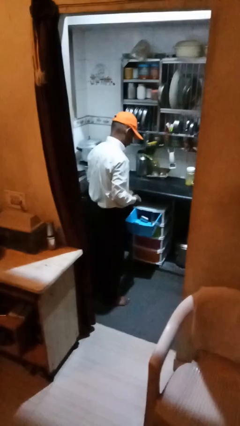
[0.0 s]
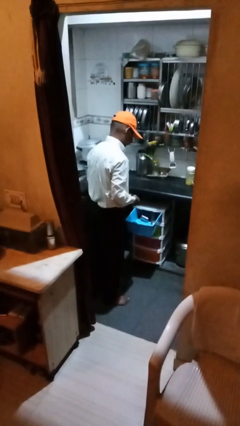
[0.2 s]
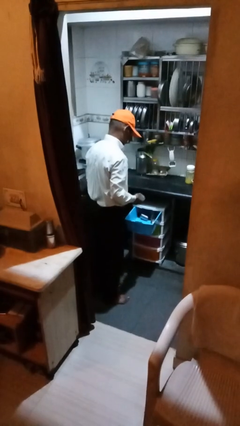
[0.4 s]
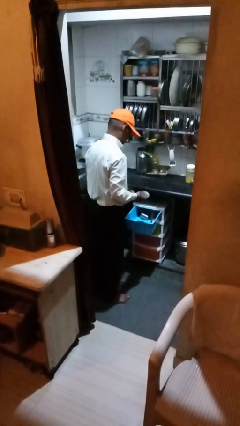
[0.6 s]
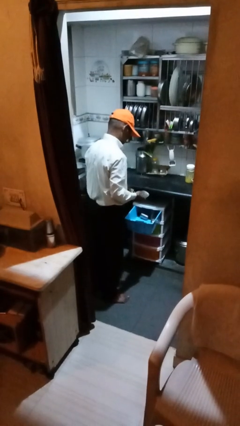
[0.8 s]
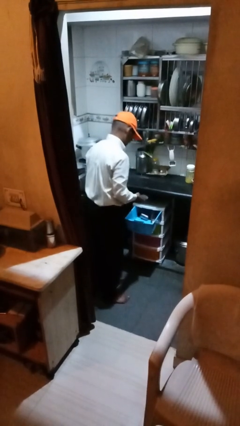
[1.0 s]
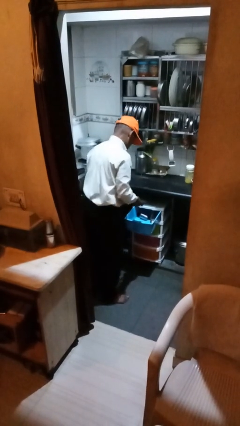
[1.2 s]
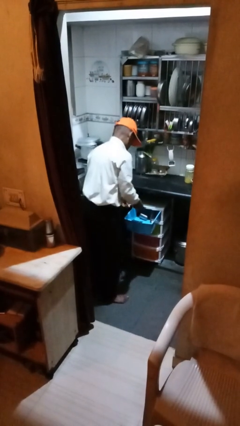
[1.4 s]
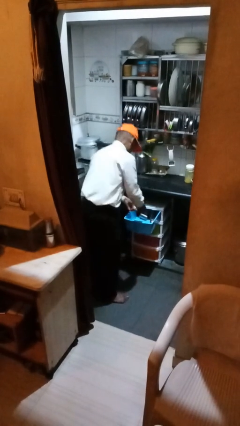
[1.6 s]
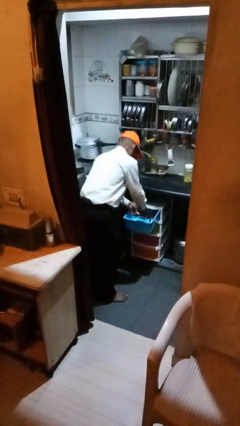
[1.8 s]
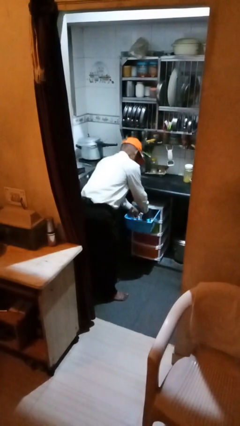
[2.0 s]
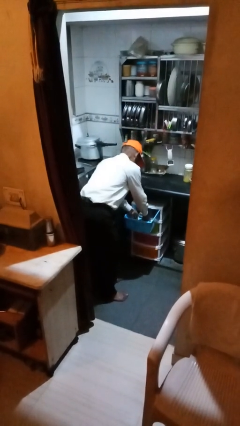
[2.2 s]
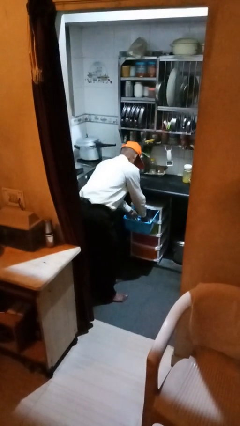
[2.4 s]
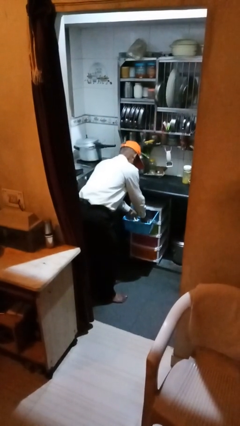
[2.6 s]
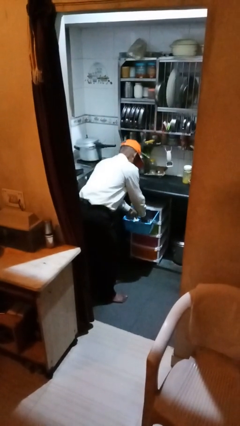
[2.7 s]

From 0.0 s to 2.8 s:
person puts object into kitchen drawer

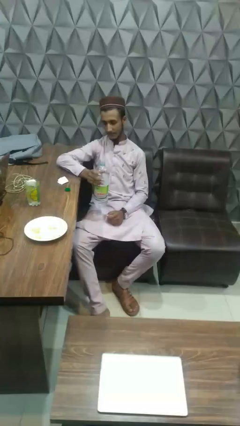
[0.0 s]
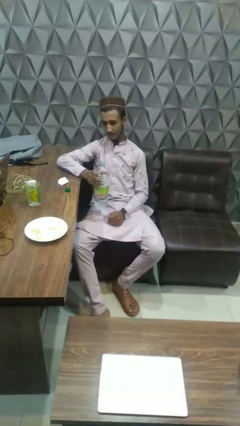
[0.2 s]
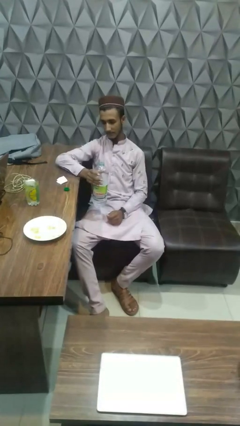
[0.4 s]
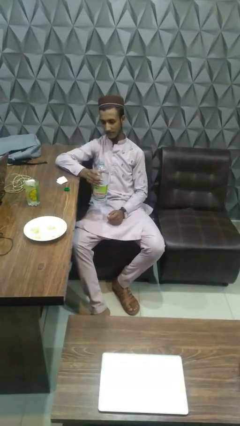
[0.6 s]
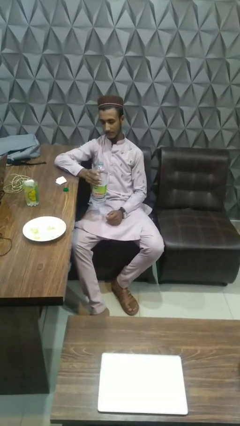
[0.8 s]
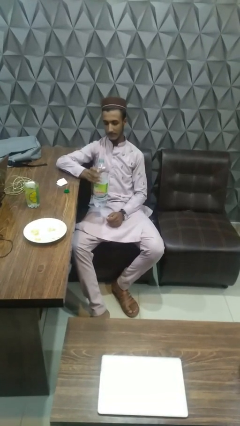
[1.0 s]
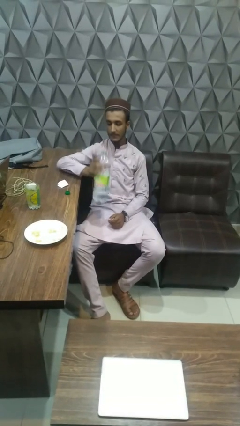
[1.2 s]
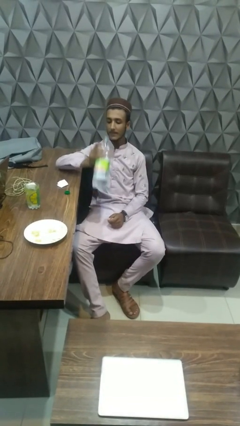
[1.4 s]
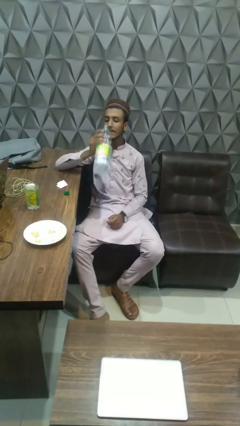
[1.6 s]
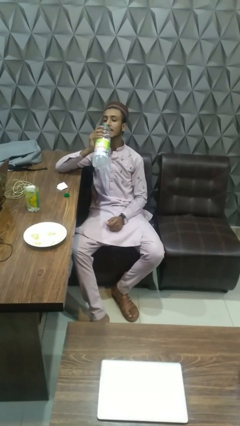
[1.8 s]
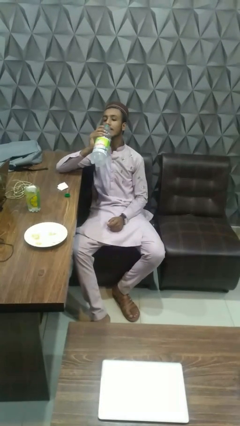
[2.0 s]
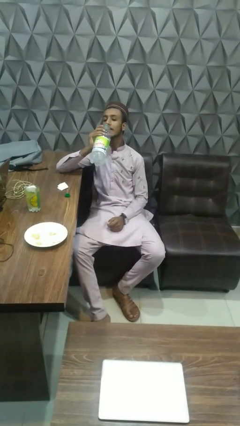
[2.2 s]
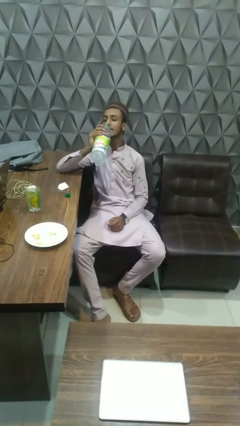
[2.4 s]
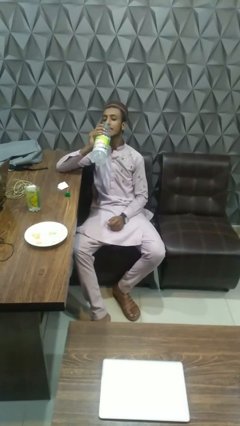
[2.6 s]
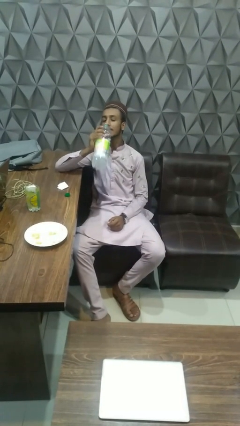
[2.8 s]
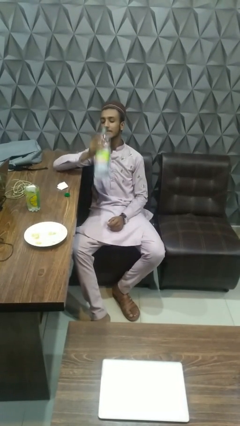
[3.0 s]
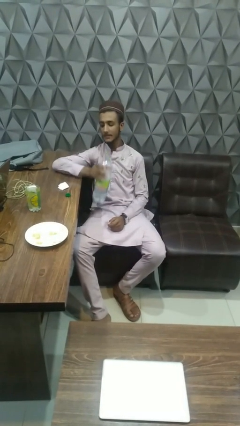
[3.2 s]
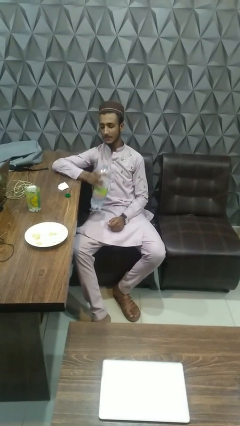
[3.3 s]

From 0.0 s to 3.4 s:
person drinks from bottle

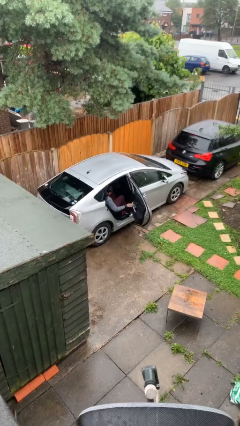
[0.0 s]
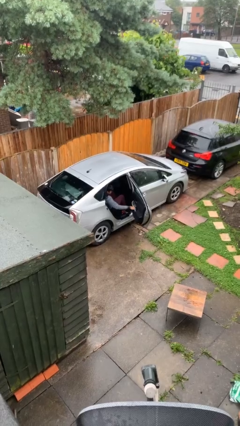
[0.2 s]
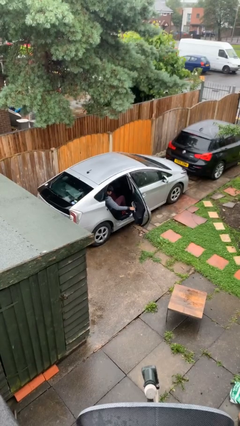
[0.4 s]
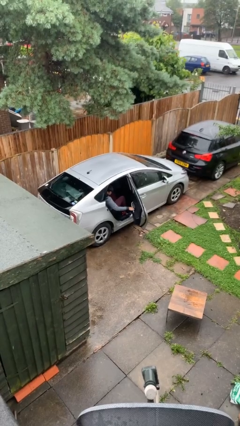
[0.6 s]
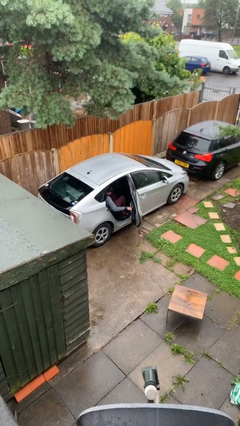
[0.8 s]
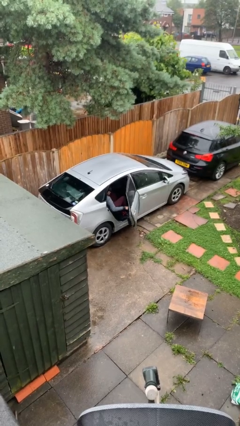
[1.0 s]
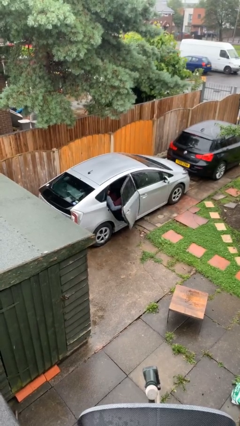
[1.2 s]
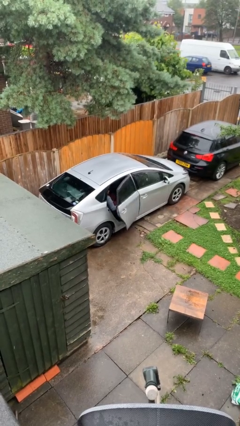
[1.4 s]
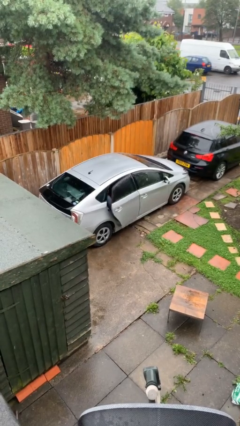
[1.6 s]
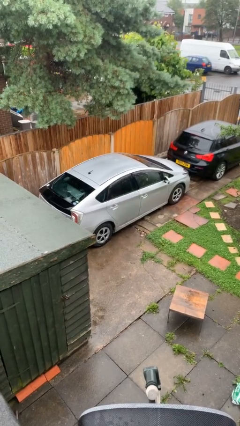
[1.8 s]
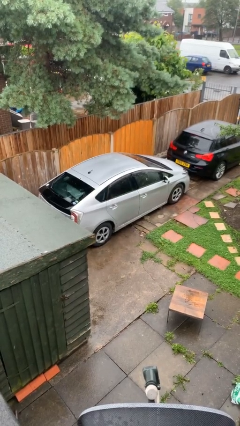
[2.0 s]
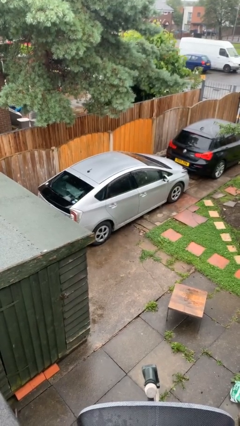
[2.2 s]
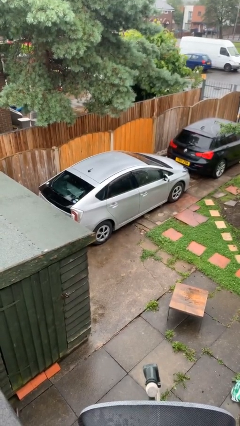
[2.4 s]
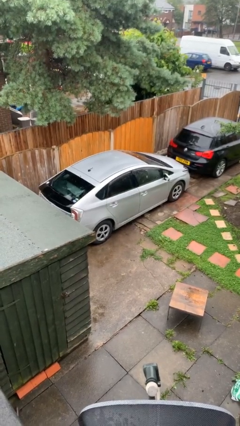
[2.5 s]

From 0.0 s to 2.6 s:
person closes car door

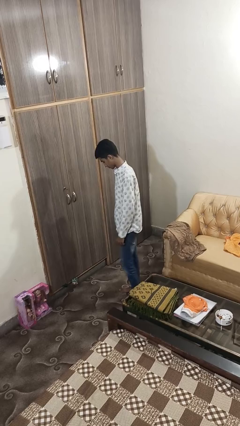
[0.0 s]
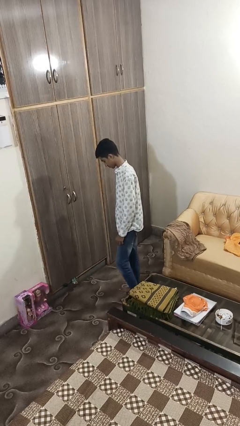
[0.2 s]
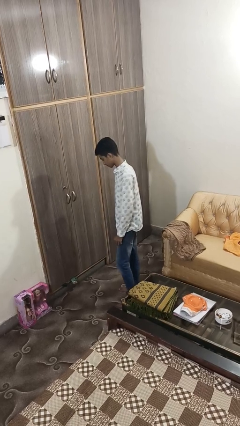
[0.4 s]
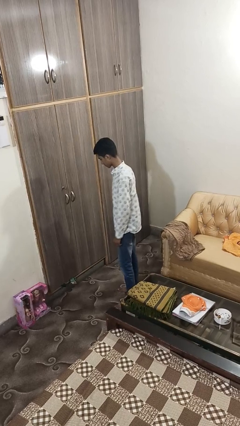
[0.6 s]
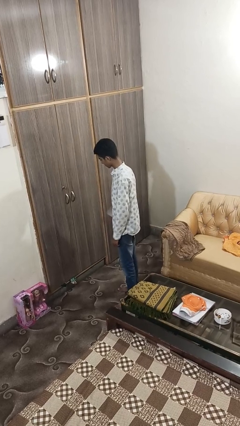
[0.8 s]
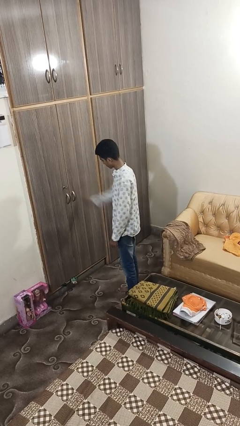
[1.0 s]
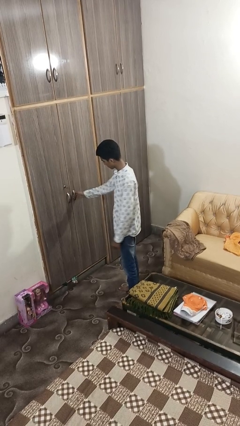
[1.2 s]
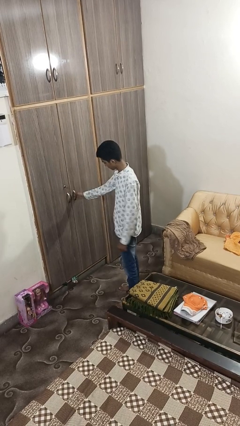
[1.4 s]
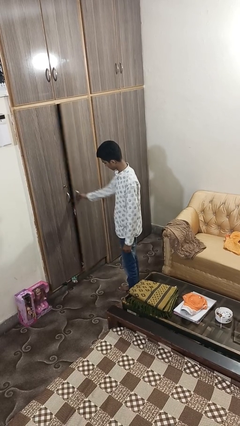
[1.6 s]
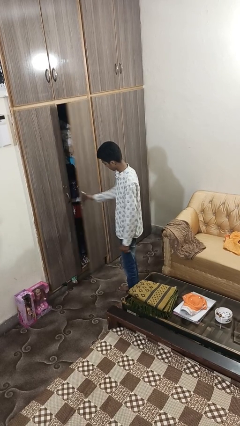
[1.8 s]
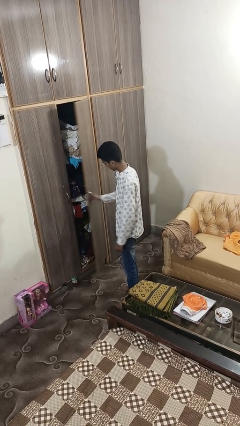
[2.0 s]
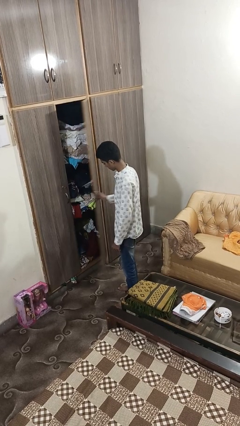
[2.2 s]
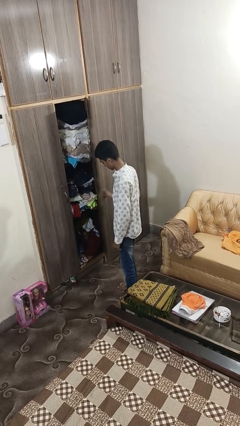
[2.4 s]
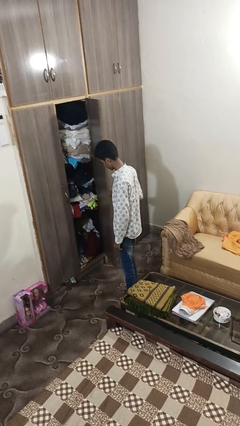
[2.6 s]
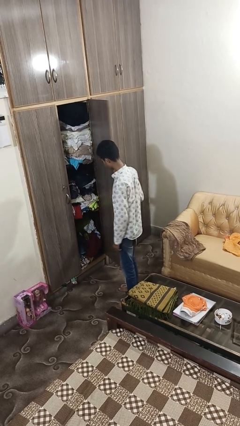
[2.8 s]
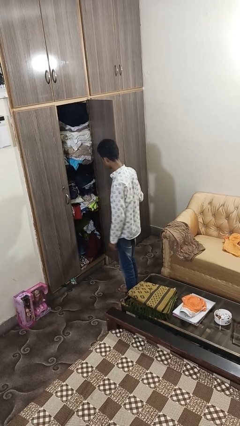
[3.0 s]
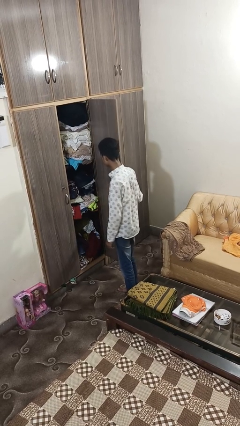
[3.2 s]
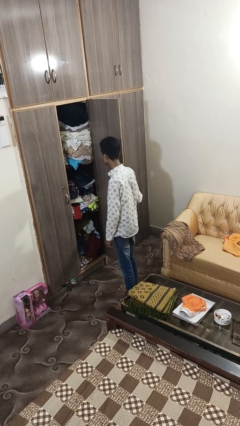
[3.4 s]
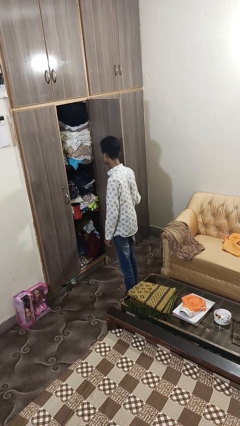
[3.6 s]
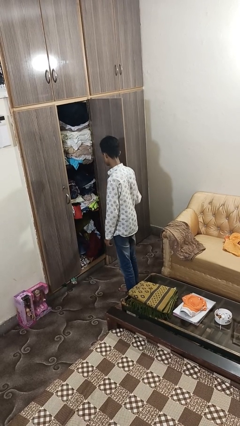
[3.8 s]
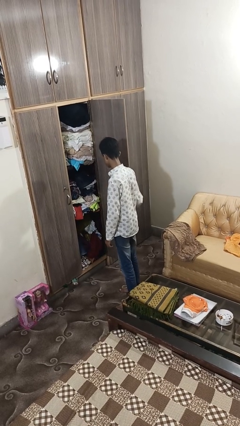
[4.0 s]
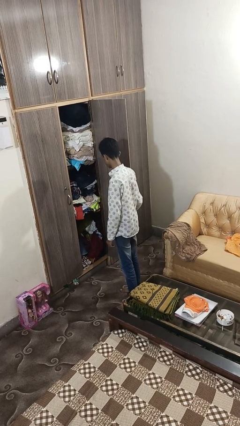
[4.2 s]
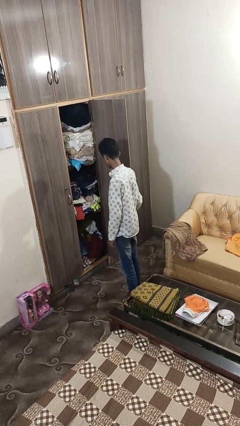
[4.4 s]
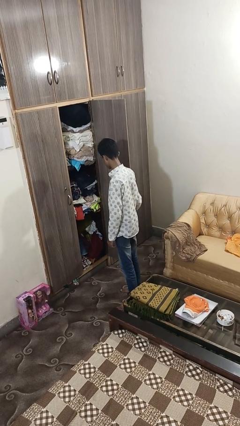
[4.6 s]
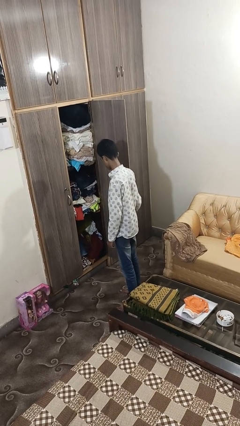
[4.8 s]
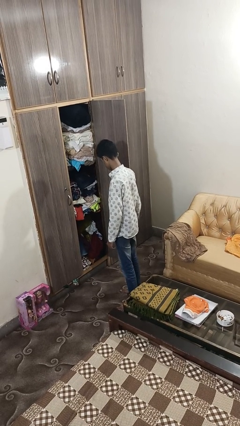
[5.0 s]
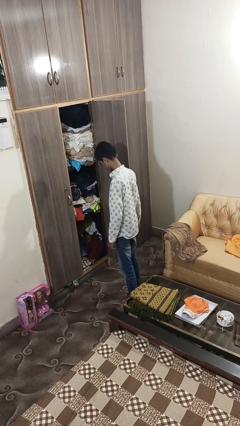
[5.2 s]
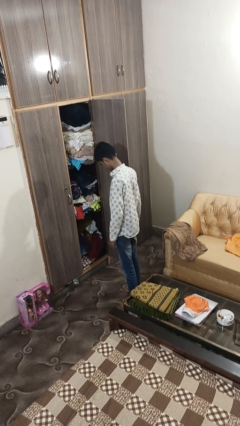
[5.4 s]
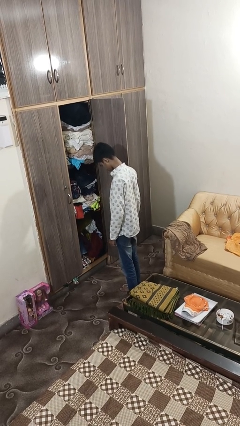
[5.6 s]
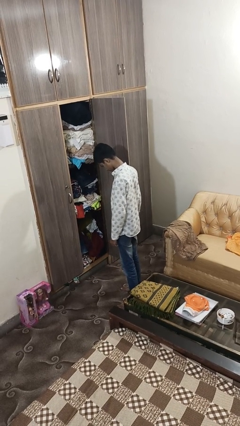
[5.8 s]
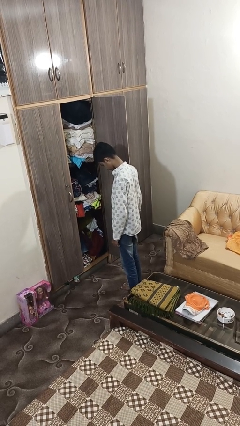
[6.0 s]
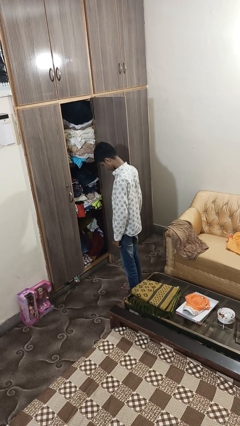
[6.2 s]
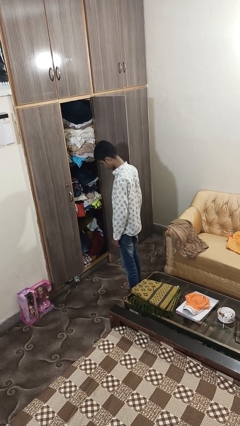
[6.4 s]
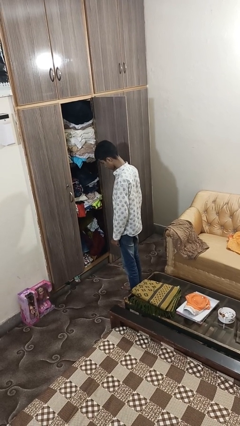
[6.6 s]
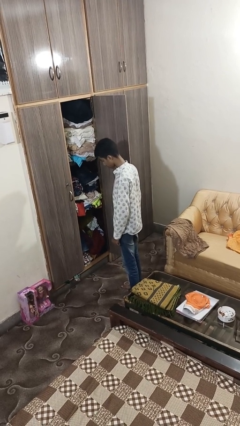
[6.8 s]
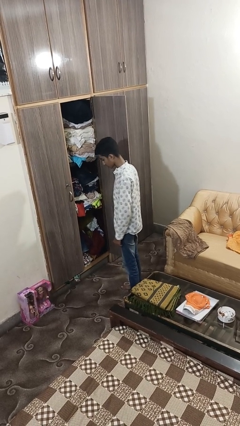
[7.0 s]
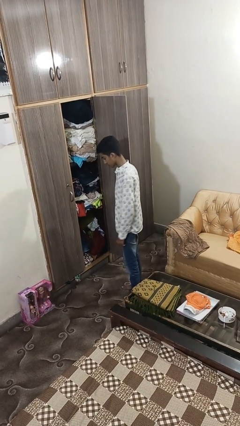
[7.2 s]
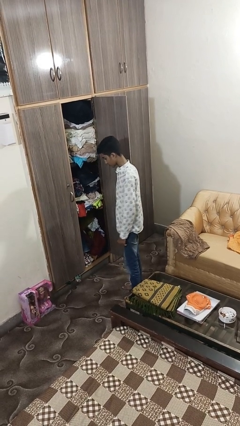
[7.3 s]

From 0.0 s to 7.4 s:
person opens closet door

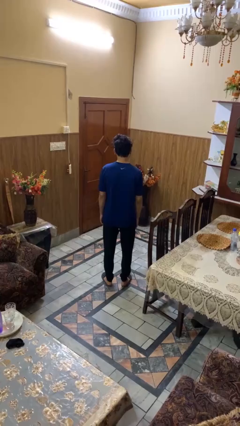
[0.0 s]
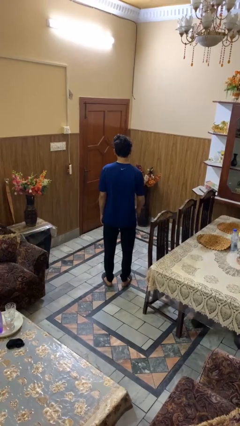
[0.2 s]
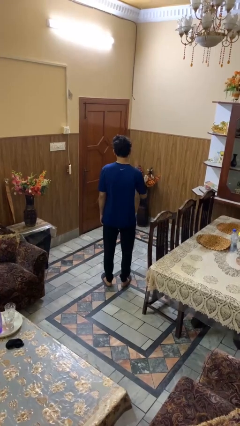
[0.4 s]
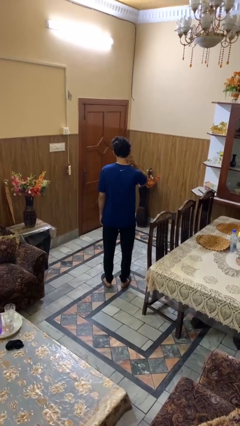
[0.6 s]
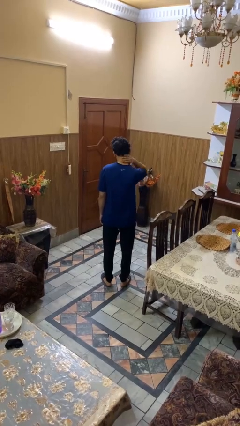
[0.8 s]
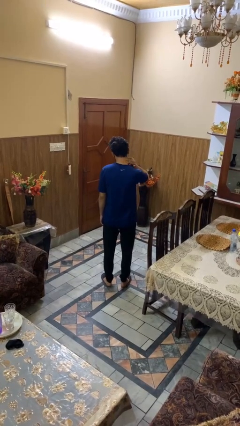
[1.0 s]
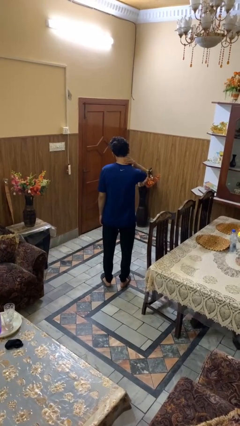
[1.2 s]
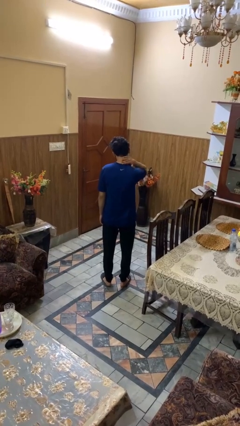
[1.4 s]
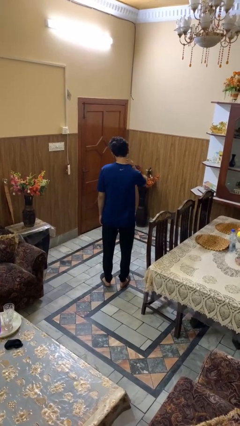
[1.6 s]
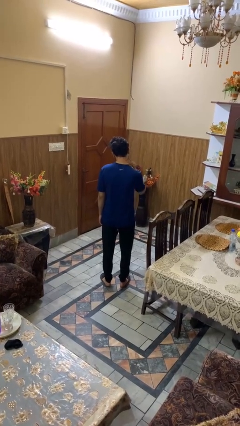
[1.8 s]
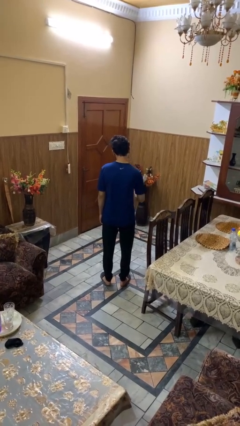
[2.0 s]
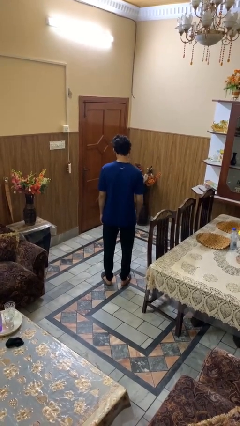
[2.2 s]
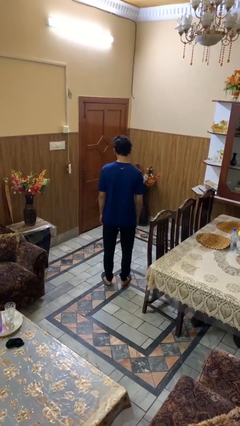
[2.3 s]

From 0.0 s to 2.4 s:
person rubs neck
